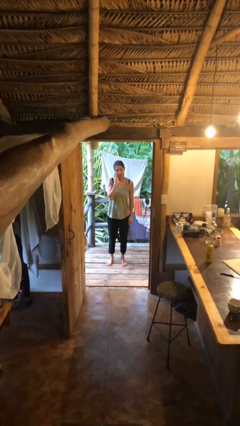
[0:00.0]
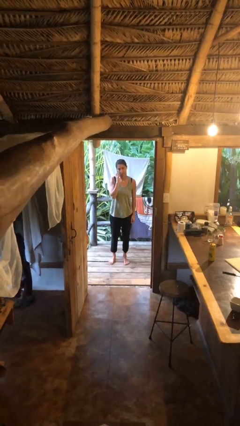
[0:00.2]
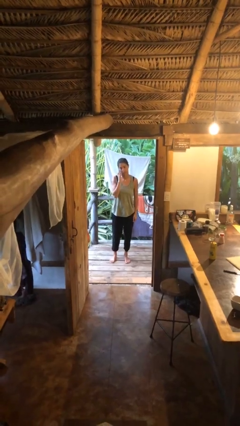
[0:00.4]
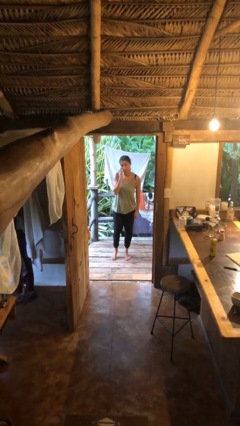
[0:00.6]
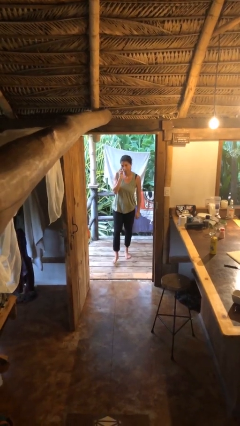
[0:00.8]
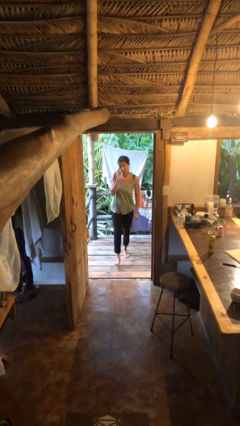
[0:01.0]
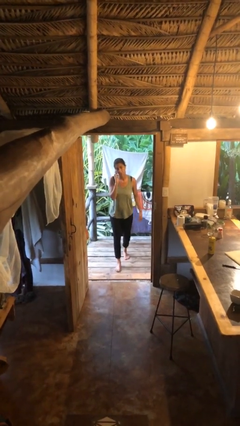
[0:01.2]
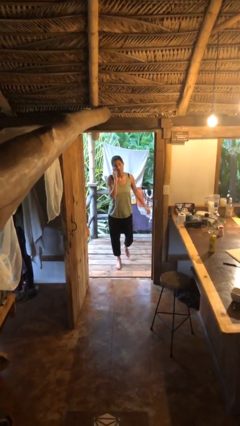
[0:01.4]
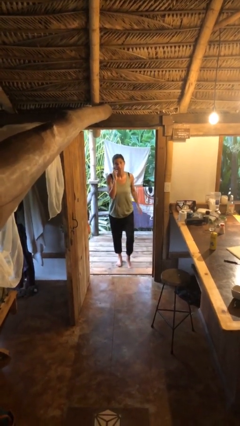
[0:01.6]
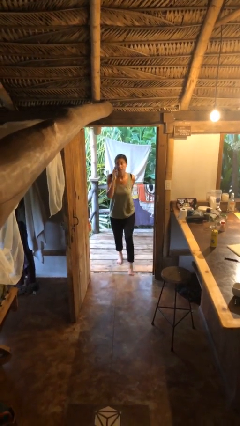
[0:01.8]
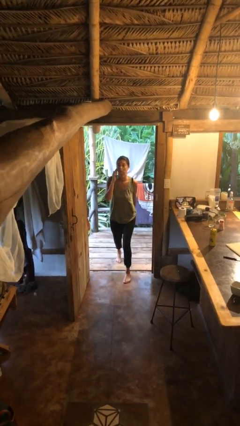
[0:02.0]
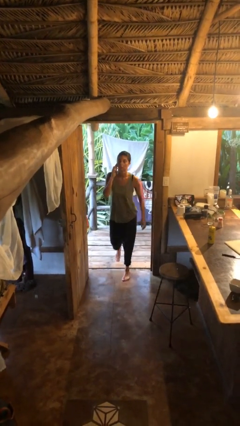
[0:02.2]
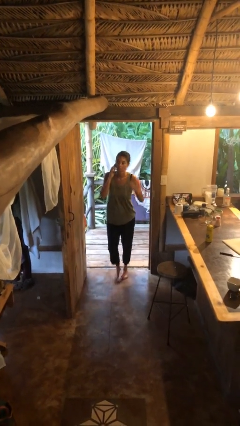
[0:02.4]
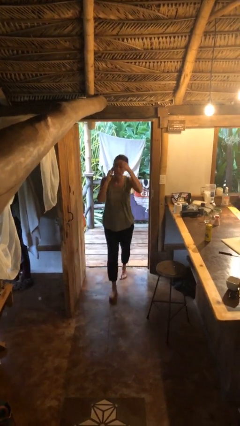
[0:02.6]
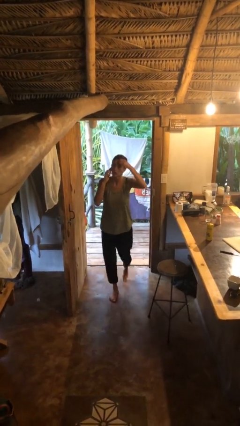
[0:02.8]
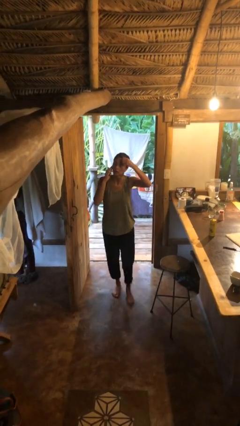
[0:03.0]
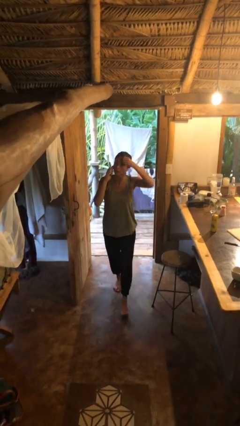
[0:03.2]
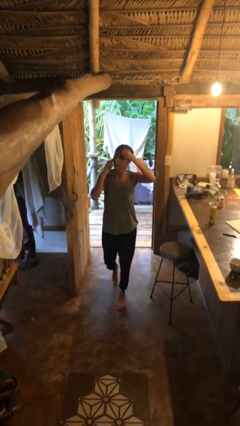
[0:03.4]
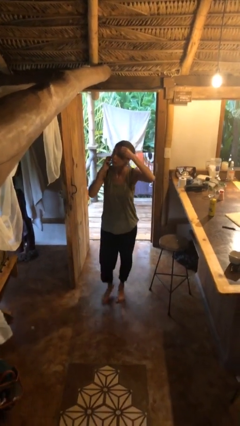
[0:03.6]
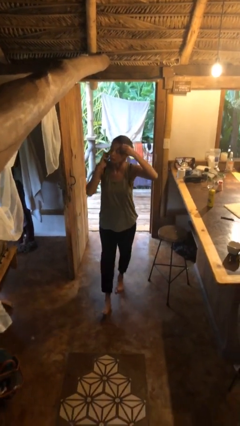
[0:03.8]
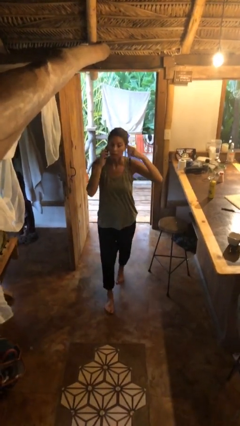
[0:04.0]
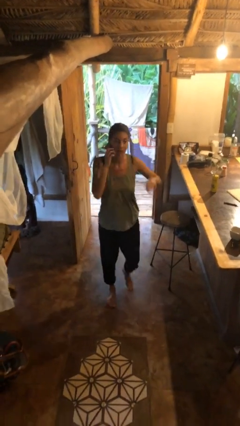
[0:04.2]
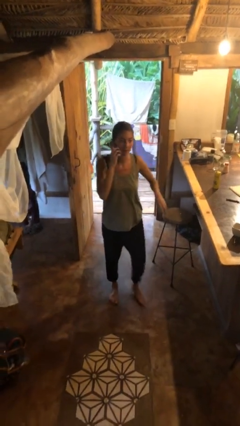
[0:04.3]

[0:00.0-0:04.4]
person enters scene through structure

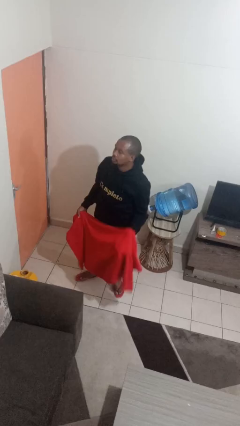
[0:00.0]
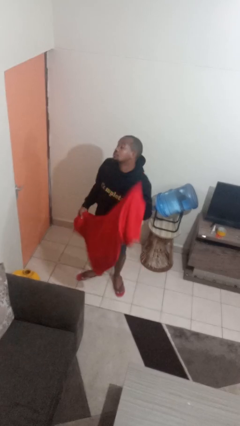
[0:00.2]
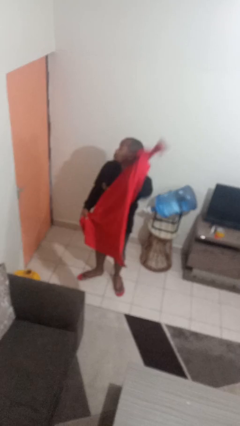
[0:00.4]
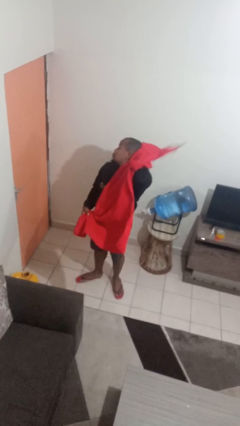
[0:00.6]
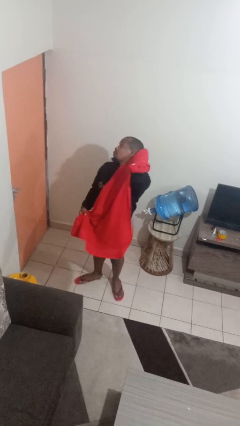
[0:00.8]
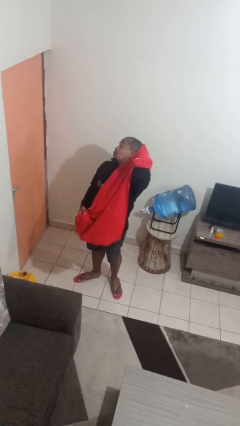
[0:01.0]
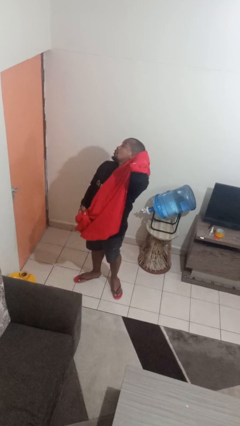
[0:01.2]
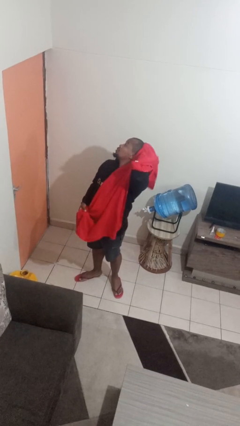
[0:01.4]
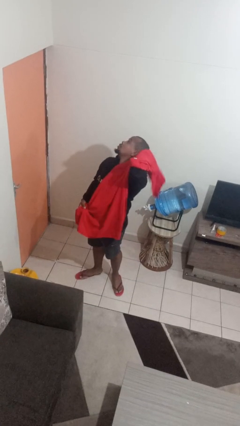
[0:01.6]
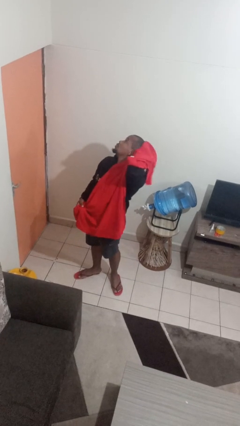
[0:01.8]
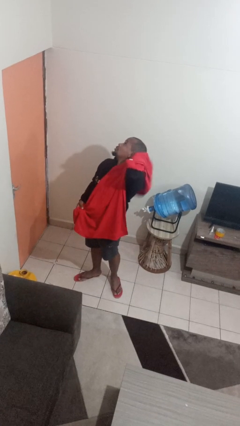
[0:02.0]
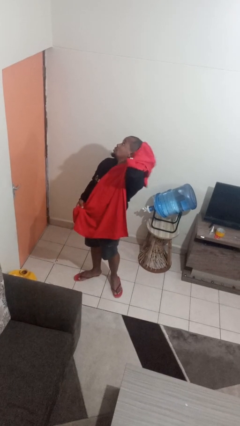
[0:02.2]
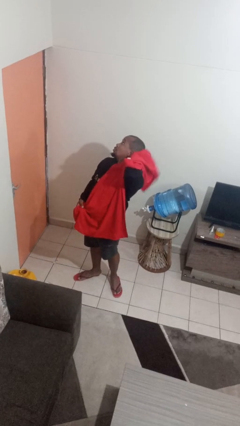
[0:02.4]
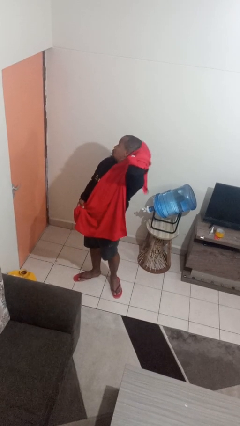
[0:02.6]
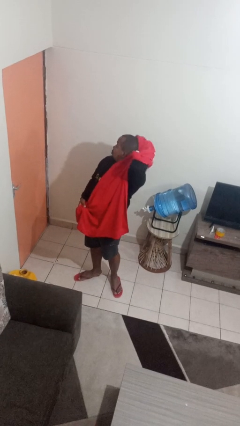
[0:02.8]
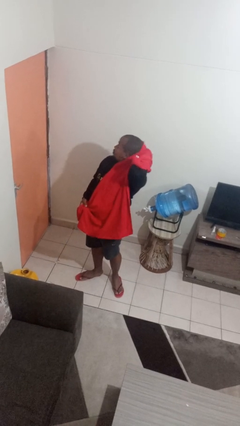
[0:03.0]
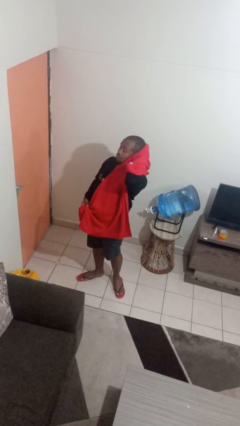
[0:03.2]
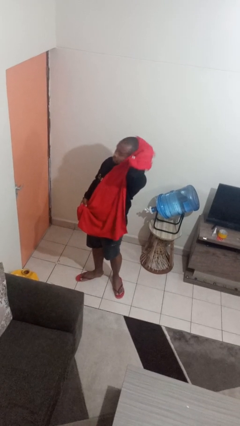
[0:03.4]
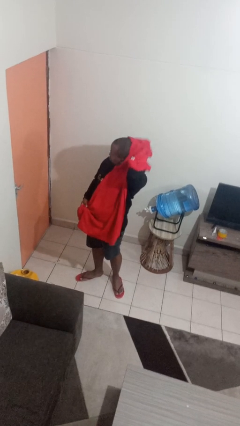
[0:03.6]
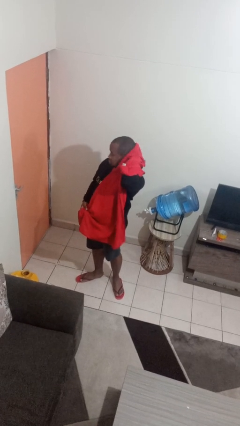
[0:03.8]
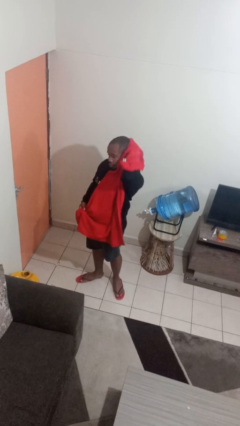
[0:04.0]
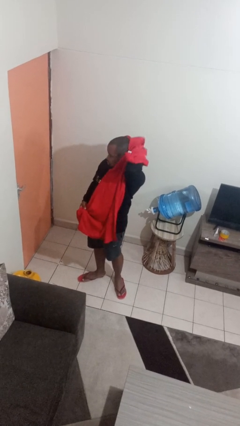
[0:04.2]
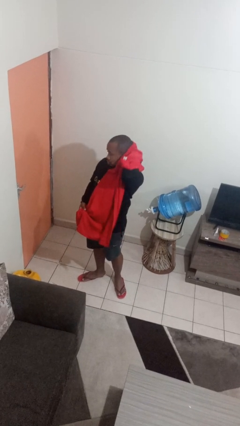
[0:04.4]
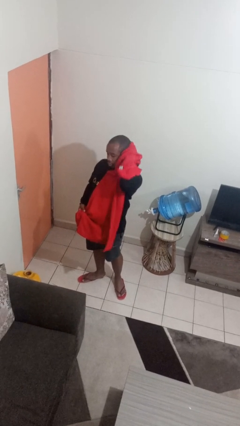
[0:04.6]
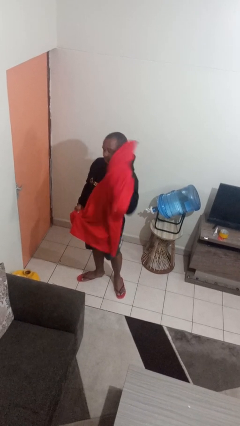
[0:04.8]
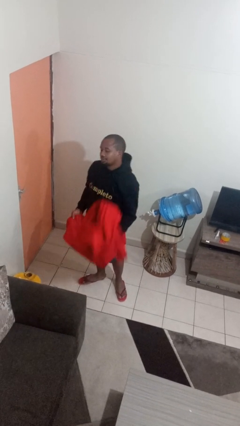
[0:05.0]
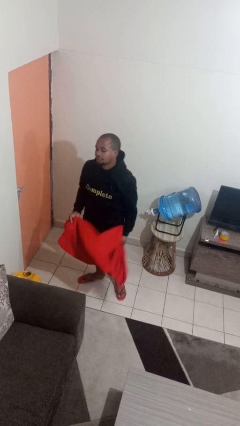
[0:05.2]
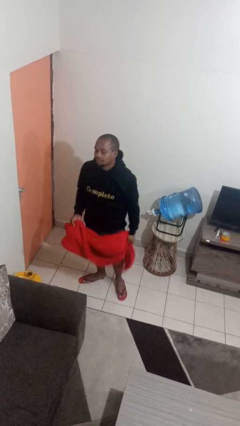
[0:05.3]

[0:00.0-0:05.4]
person dries hair with towel

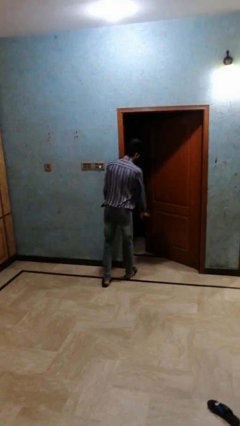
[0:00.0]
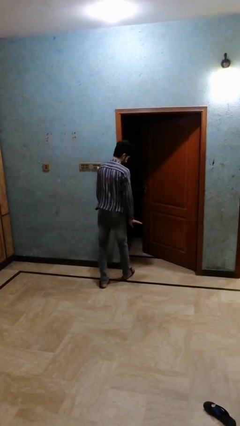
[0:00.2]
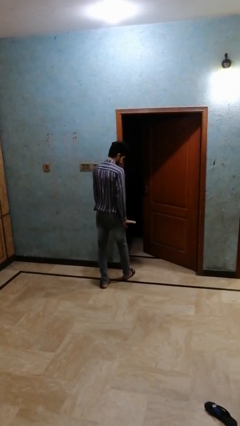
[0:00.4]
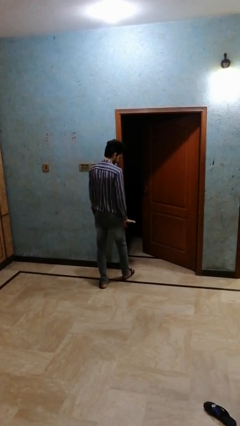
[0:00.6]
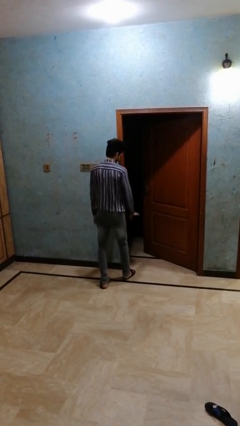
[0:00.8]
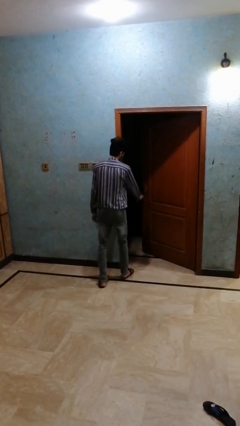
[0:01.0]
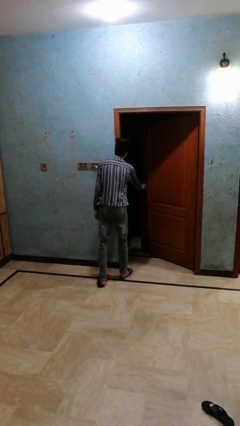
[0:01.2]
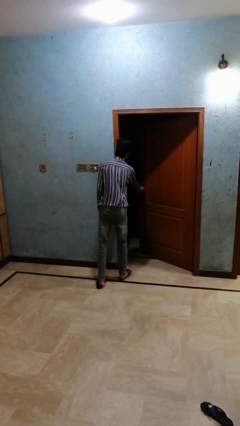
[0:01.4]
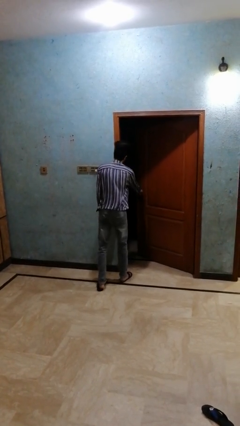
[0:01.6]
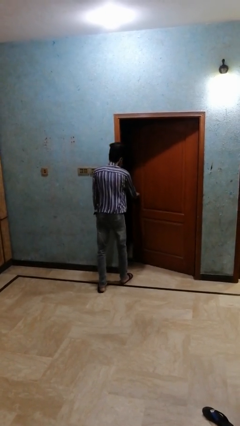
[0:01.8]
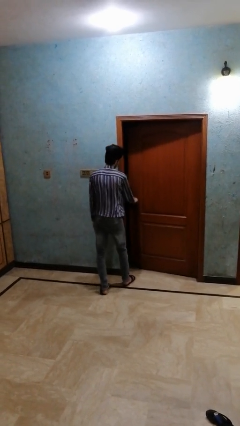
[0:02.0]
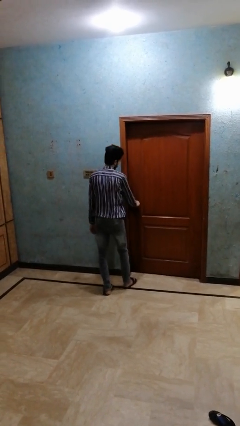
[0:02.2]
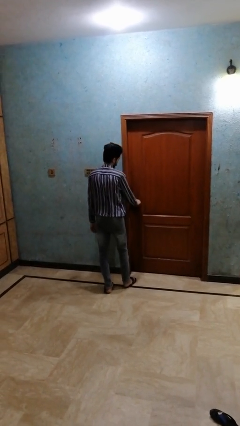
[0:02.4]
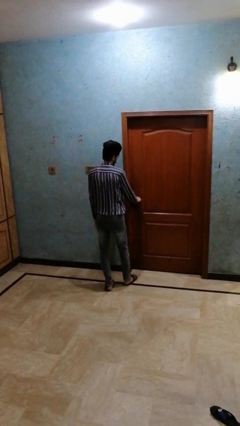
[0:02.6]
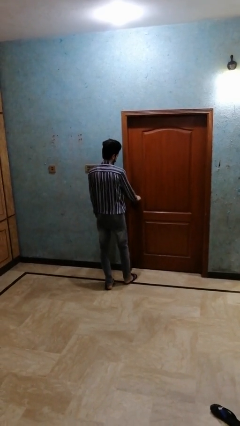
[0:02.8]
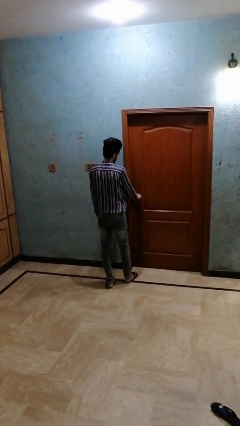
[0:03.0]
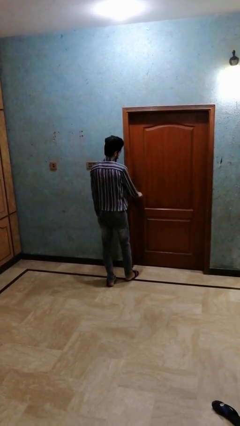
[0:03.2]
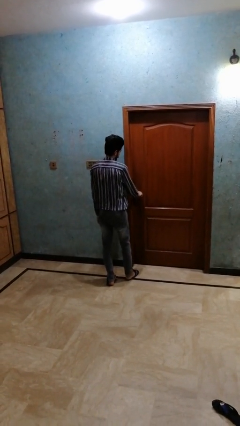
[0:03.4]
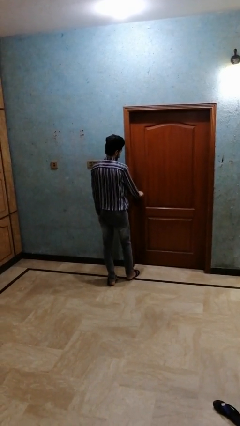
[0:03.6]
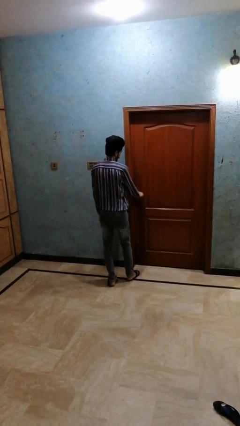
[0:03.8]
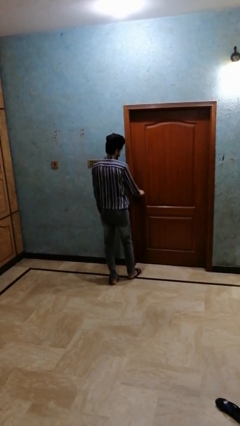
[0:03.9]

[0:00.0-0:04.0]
person closes closet door

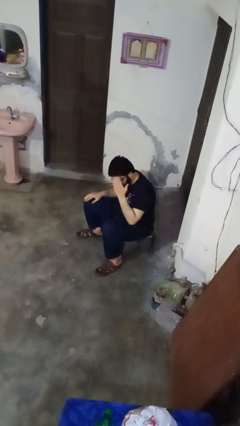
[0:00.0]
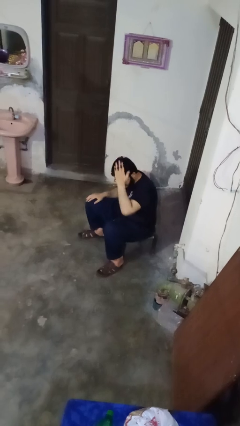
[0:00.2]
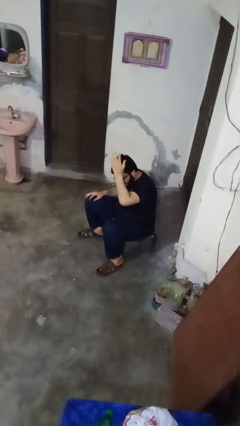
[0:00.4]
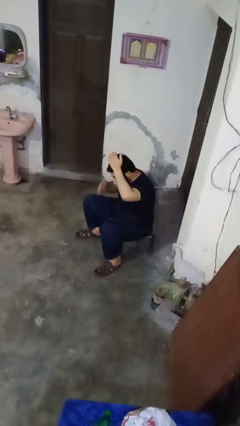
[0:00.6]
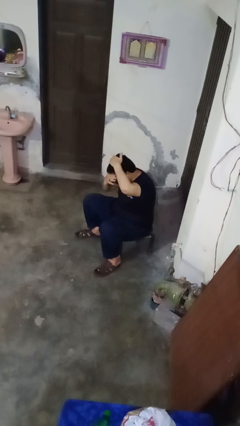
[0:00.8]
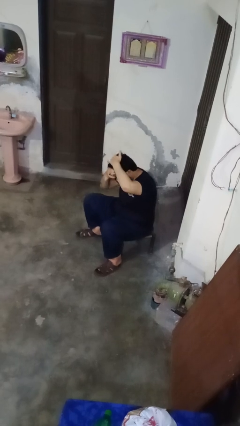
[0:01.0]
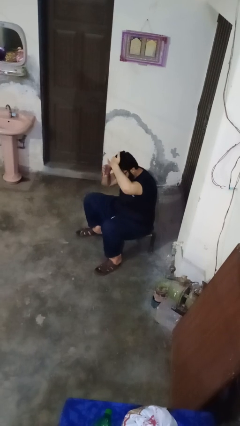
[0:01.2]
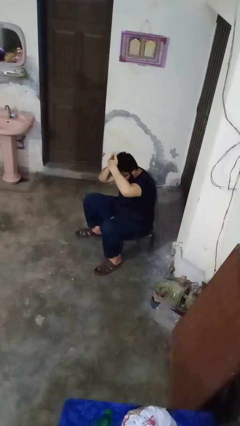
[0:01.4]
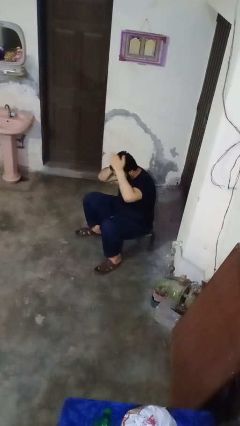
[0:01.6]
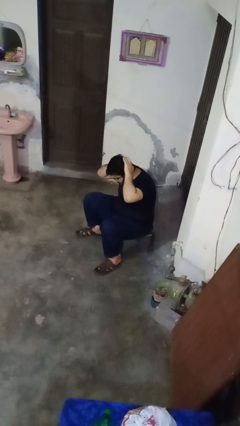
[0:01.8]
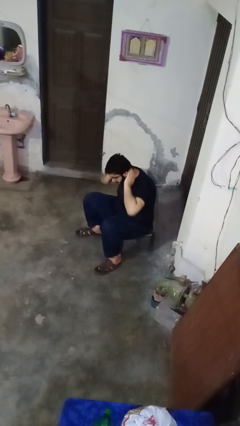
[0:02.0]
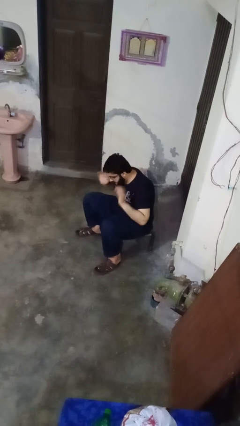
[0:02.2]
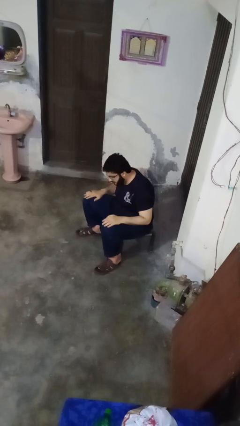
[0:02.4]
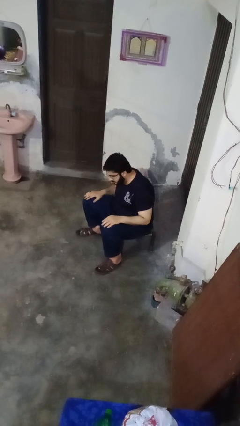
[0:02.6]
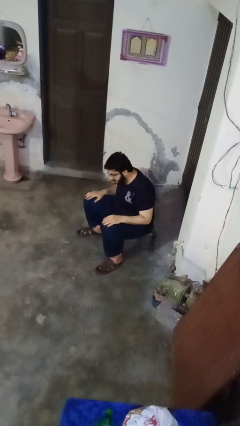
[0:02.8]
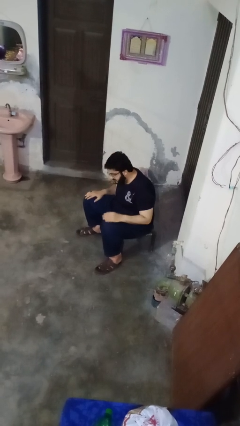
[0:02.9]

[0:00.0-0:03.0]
person strokes hair

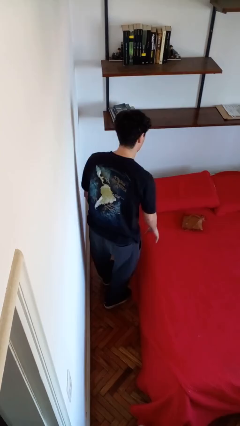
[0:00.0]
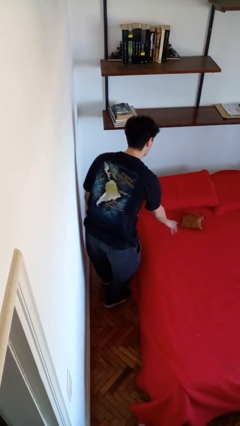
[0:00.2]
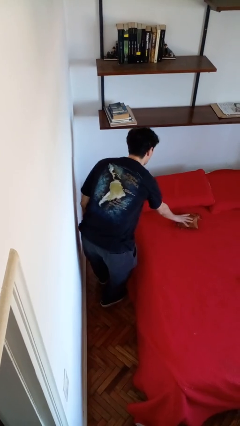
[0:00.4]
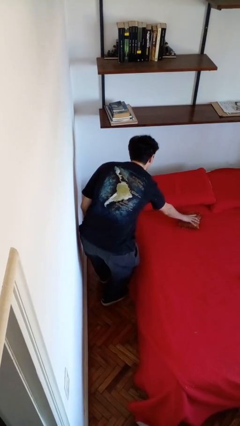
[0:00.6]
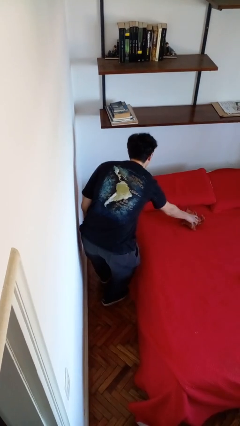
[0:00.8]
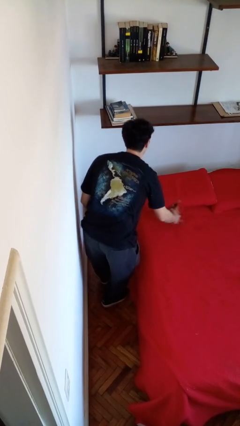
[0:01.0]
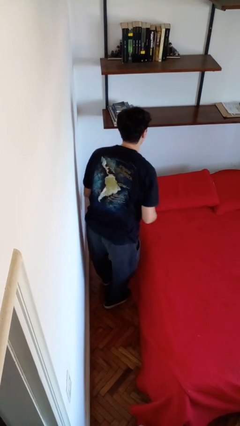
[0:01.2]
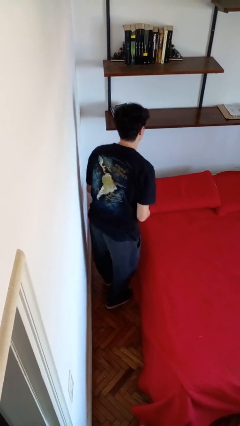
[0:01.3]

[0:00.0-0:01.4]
person picks up object from bed
